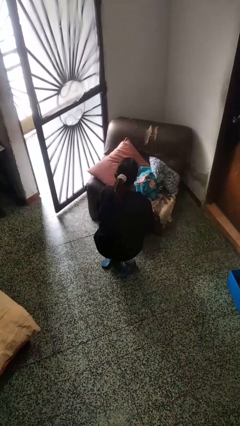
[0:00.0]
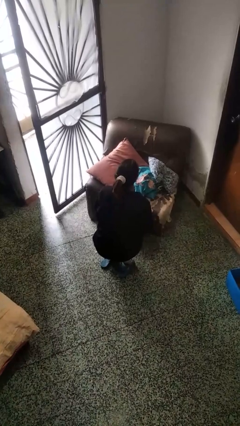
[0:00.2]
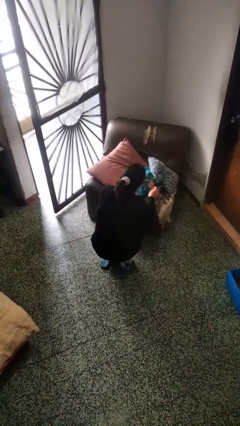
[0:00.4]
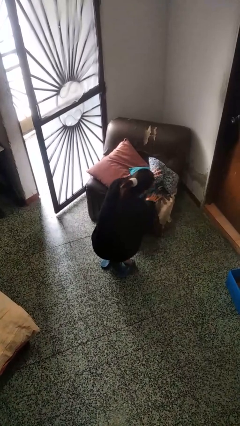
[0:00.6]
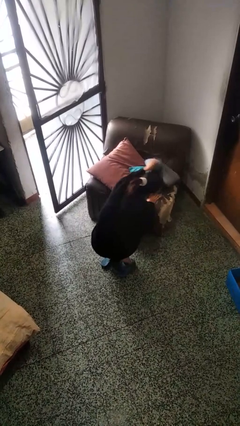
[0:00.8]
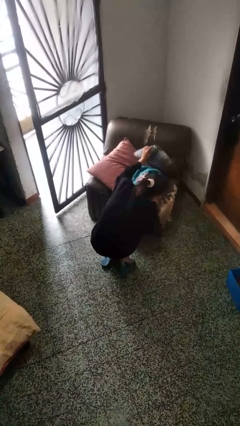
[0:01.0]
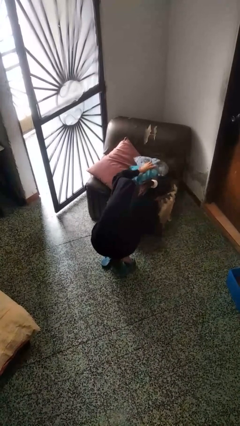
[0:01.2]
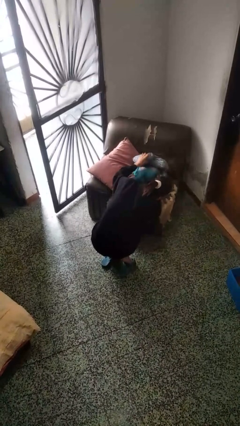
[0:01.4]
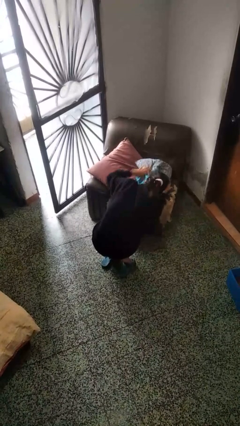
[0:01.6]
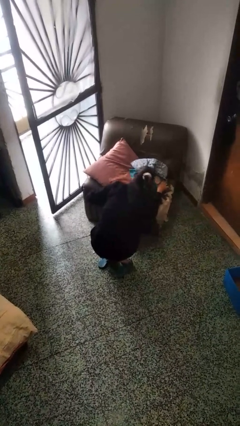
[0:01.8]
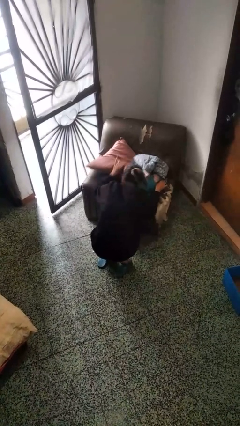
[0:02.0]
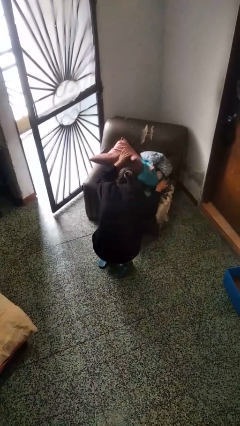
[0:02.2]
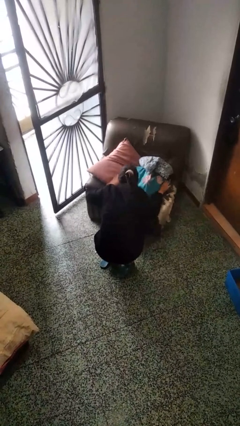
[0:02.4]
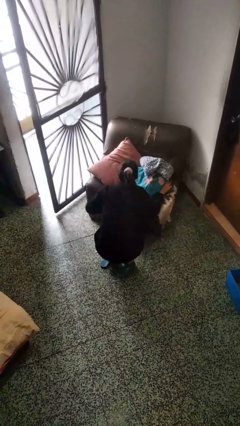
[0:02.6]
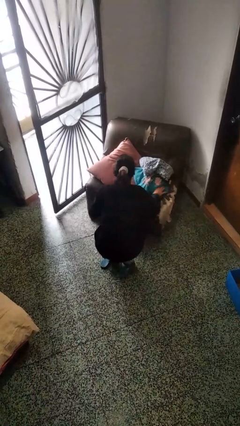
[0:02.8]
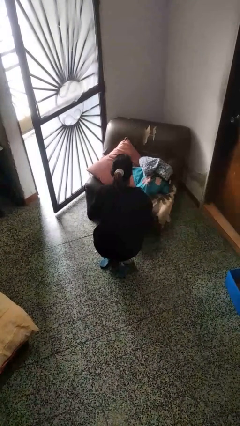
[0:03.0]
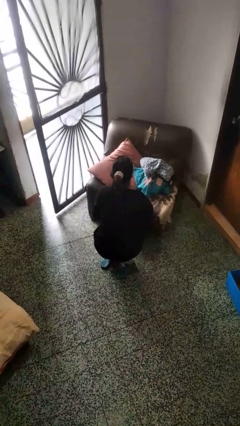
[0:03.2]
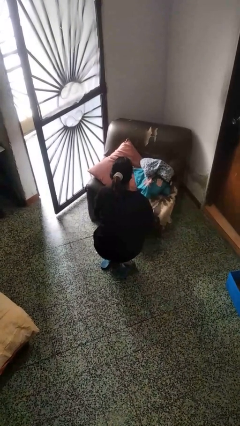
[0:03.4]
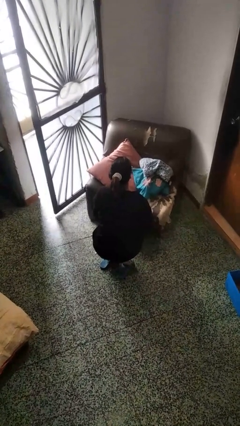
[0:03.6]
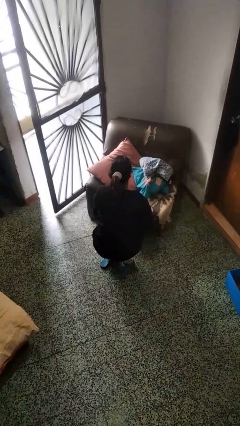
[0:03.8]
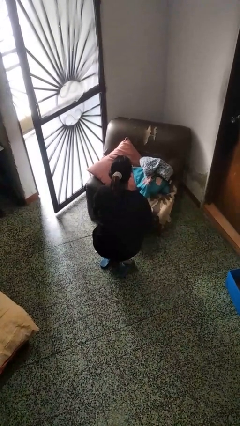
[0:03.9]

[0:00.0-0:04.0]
person searches in couch

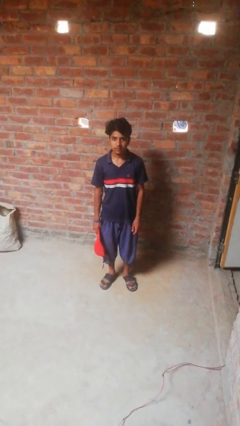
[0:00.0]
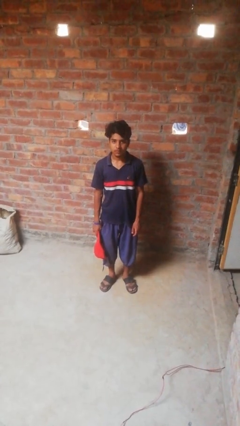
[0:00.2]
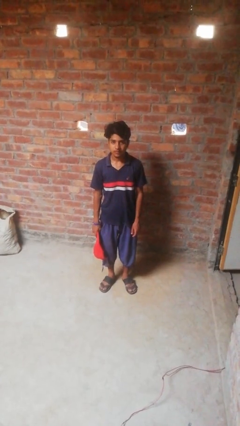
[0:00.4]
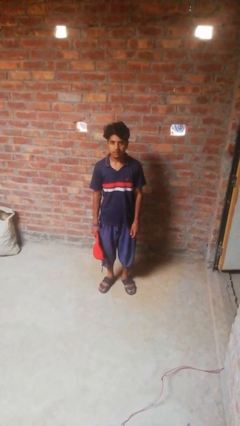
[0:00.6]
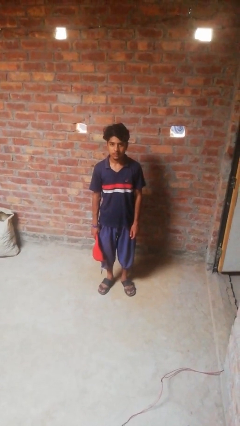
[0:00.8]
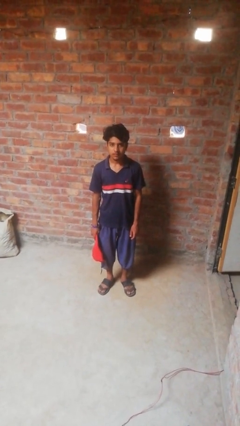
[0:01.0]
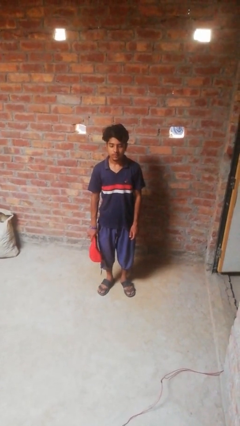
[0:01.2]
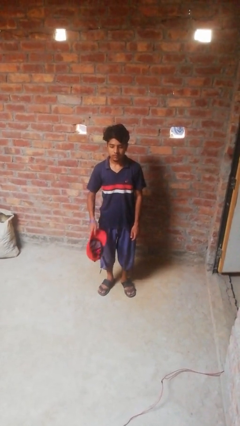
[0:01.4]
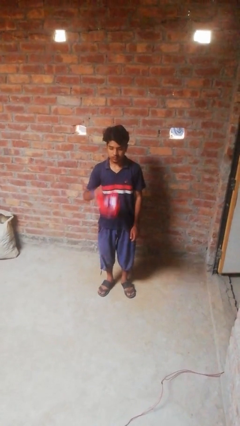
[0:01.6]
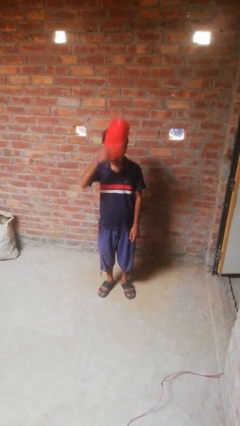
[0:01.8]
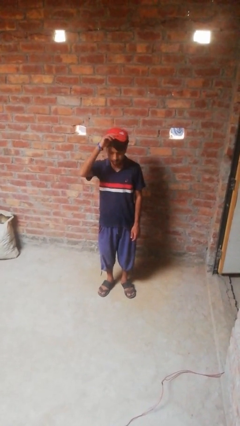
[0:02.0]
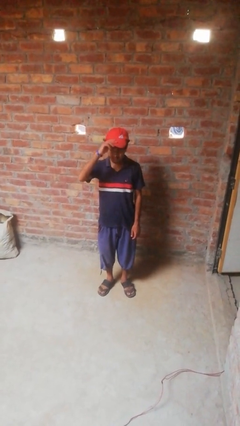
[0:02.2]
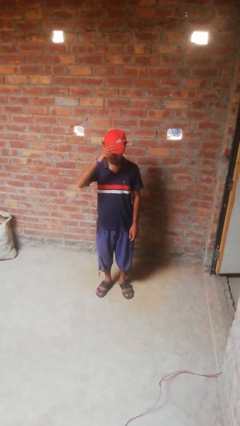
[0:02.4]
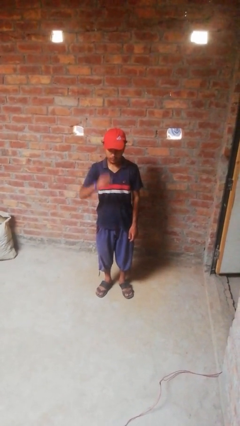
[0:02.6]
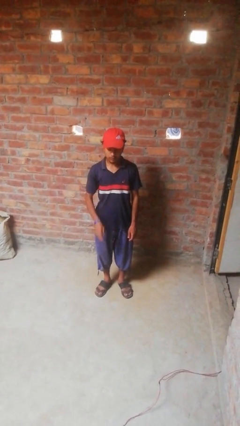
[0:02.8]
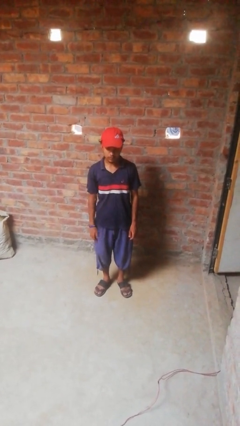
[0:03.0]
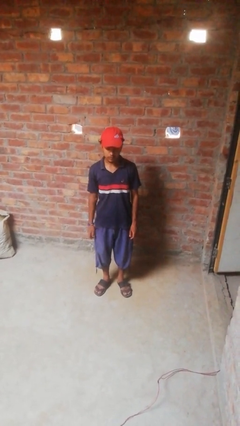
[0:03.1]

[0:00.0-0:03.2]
person puts on hat

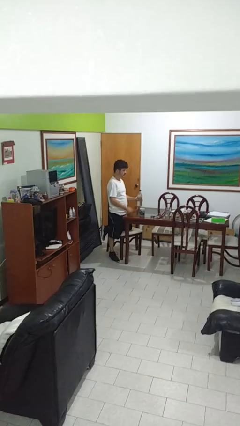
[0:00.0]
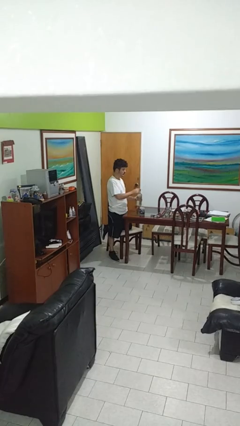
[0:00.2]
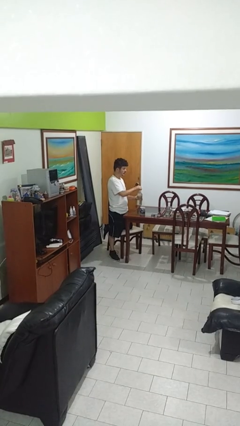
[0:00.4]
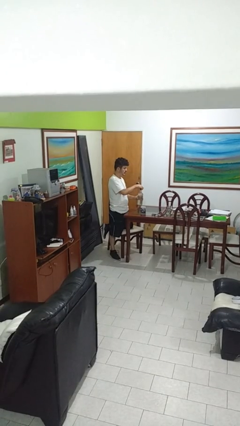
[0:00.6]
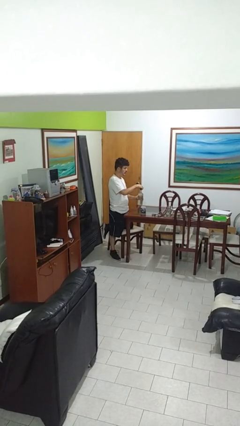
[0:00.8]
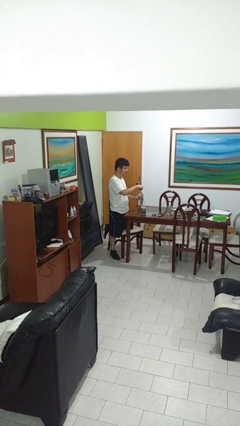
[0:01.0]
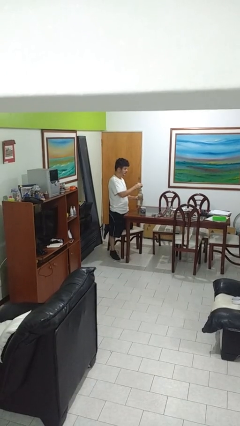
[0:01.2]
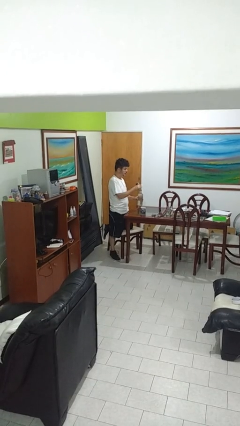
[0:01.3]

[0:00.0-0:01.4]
person unscrews lid from bottle

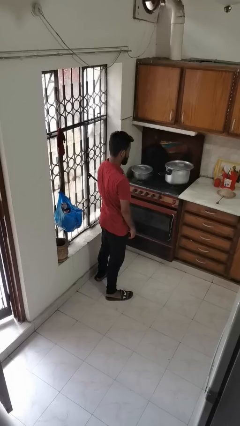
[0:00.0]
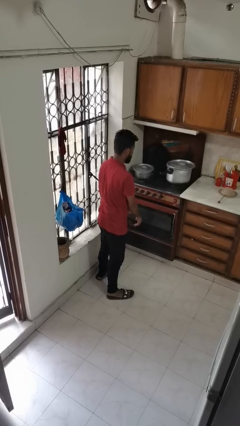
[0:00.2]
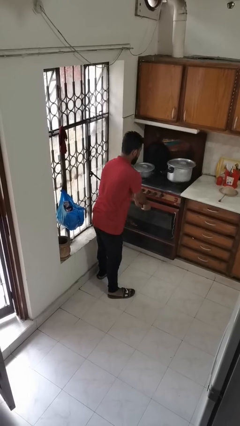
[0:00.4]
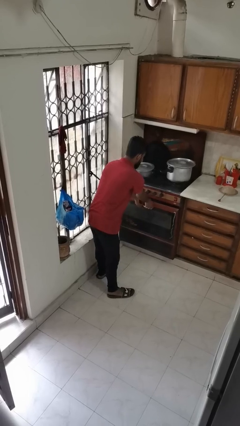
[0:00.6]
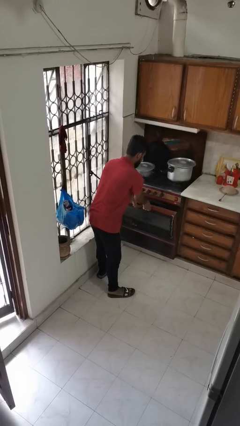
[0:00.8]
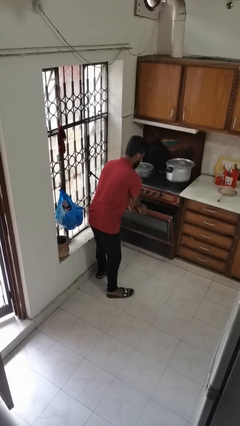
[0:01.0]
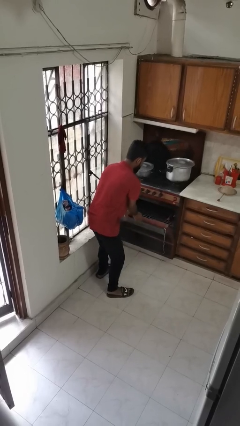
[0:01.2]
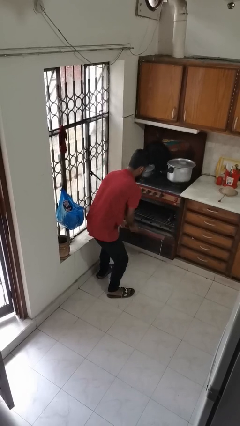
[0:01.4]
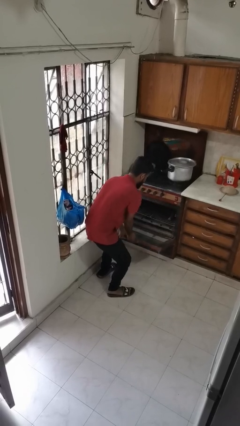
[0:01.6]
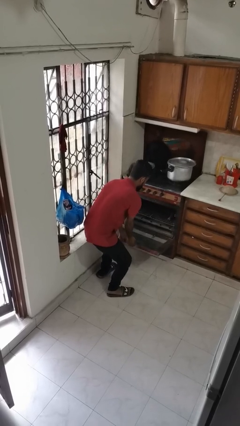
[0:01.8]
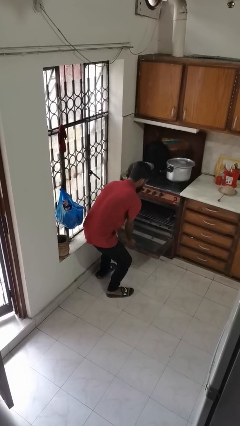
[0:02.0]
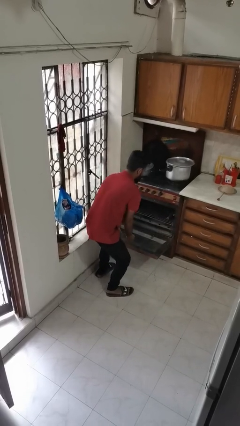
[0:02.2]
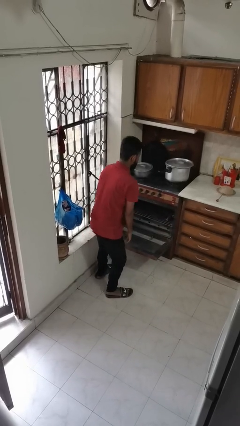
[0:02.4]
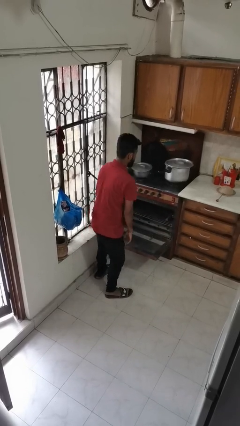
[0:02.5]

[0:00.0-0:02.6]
person opens oven door

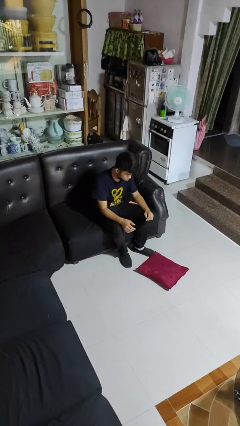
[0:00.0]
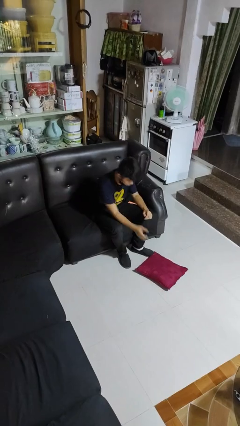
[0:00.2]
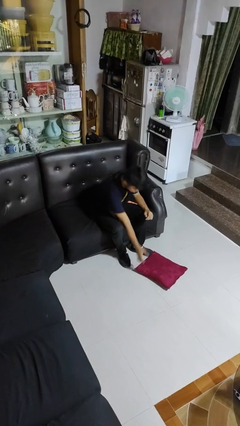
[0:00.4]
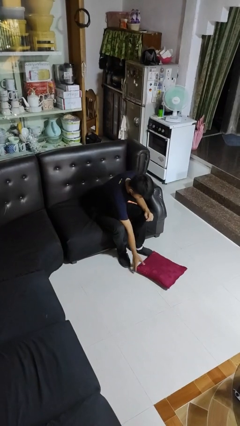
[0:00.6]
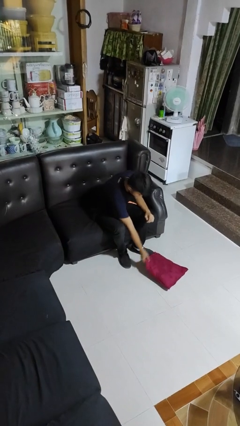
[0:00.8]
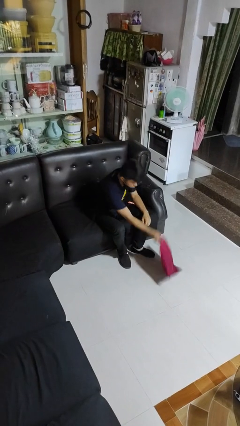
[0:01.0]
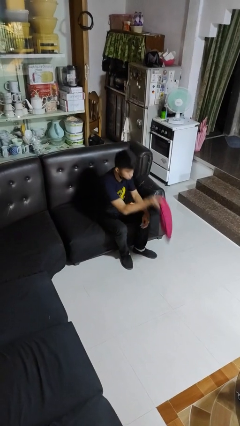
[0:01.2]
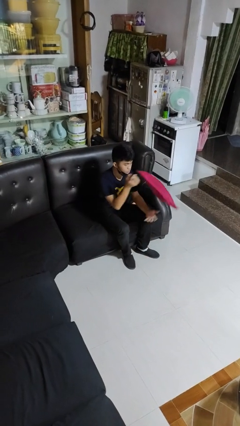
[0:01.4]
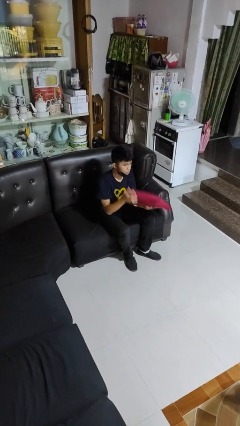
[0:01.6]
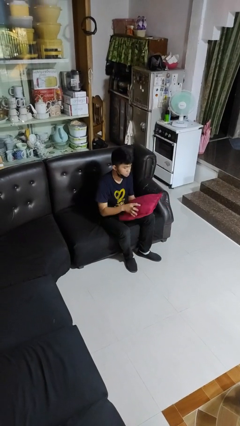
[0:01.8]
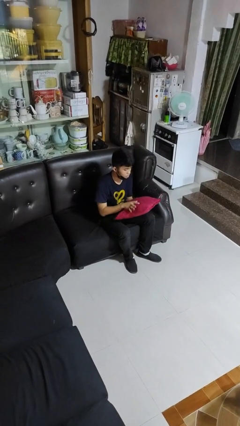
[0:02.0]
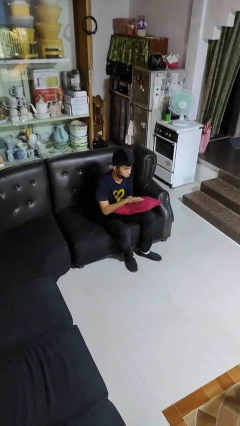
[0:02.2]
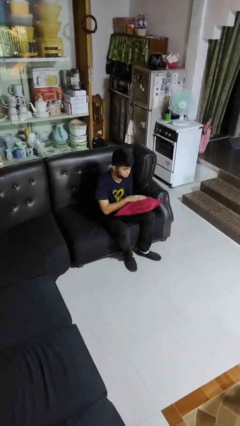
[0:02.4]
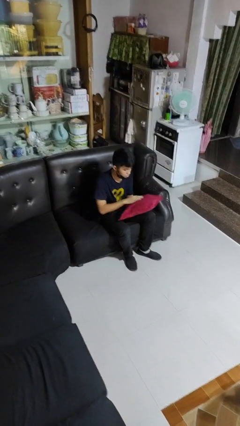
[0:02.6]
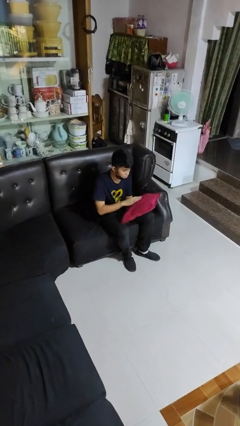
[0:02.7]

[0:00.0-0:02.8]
person picks up object from floor

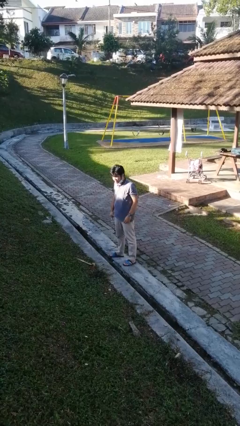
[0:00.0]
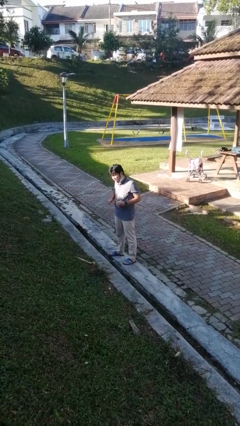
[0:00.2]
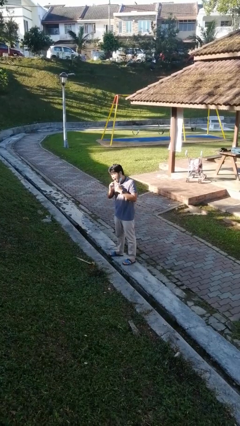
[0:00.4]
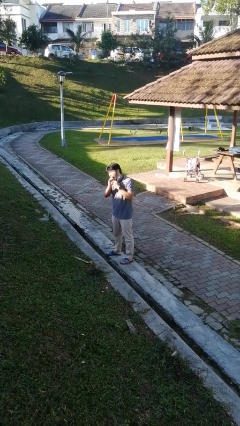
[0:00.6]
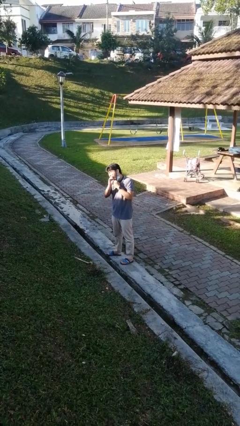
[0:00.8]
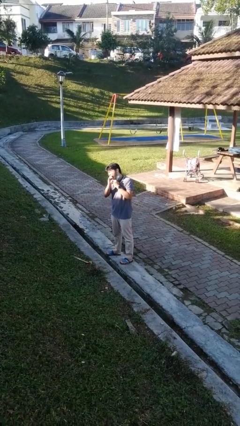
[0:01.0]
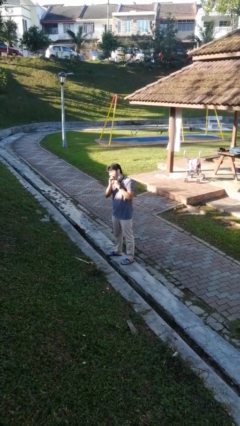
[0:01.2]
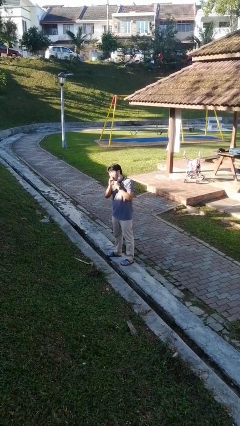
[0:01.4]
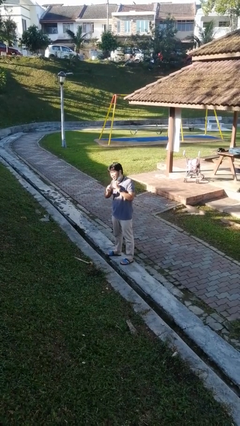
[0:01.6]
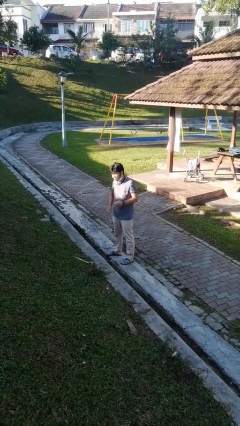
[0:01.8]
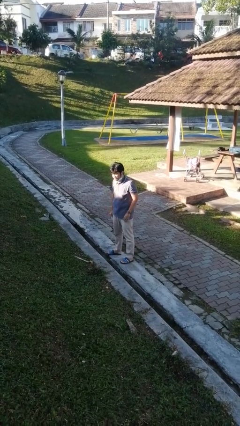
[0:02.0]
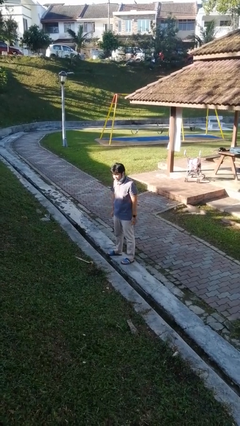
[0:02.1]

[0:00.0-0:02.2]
person flosses

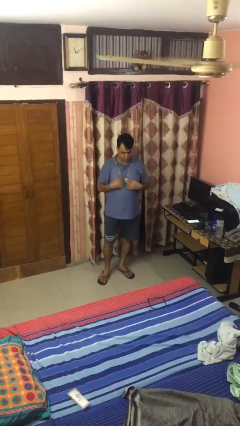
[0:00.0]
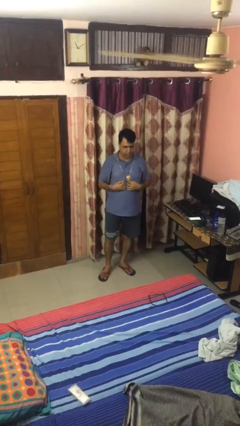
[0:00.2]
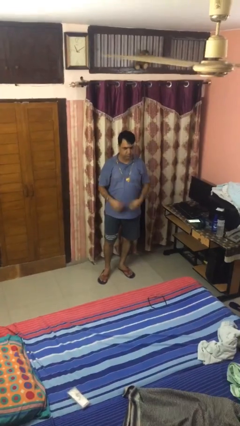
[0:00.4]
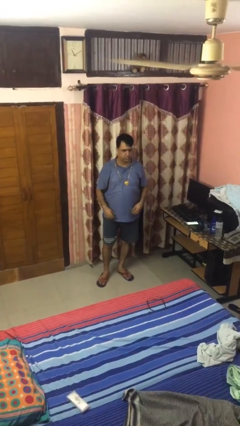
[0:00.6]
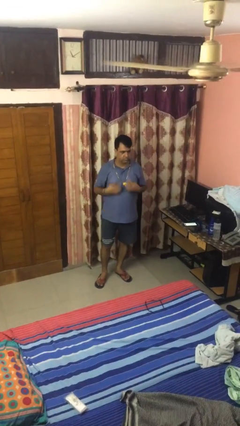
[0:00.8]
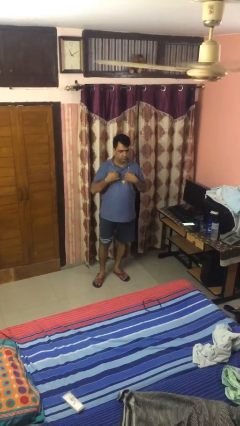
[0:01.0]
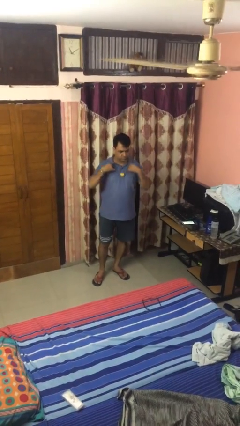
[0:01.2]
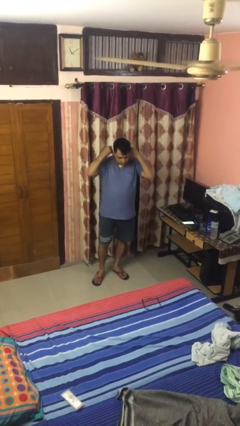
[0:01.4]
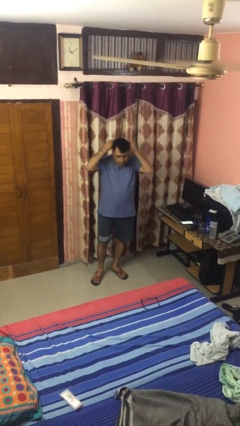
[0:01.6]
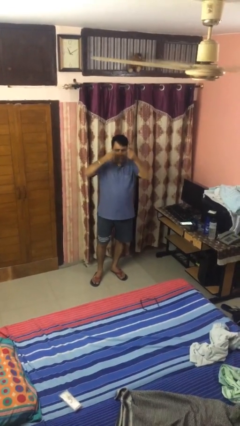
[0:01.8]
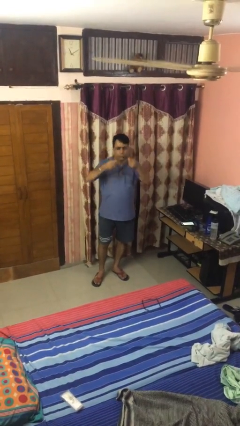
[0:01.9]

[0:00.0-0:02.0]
person takes off necklace
